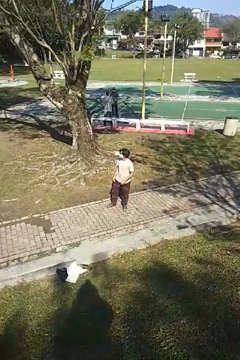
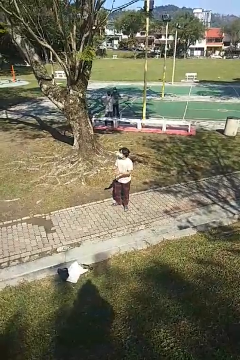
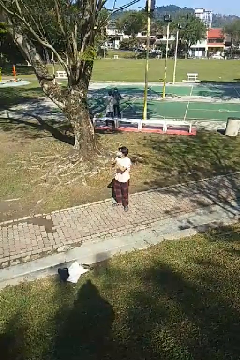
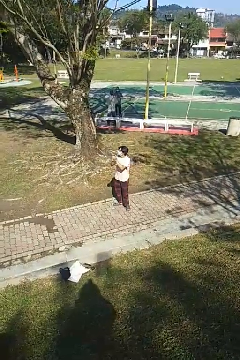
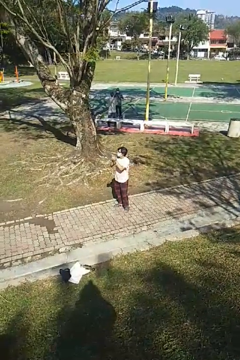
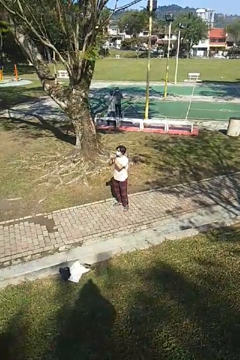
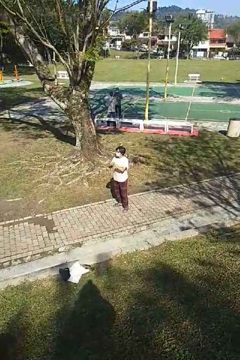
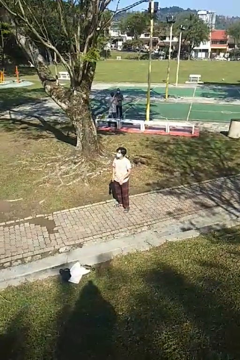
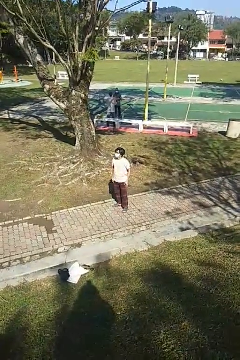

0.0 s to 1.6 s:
person claps hands

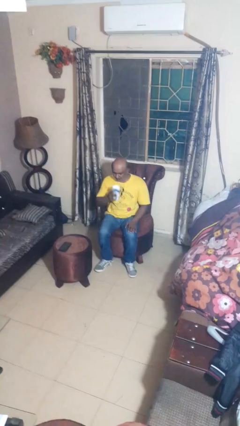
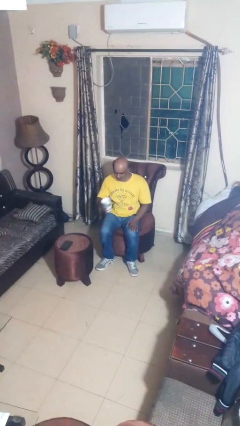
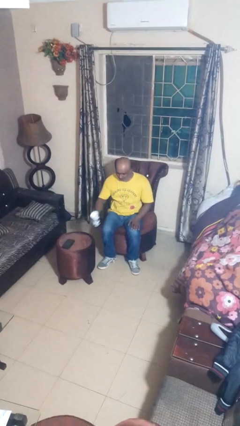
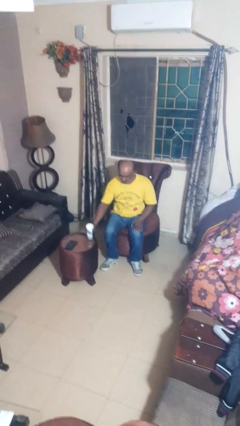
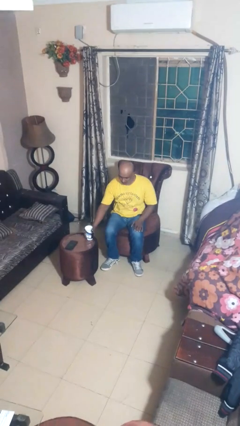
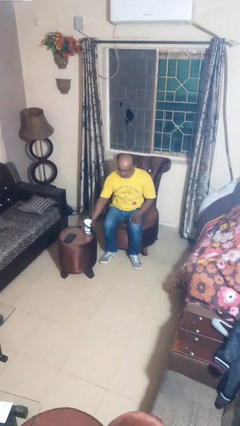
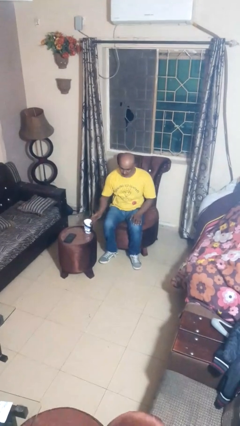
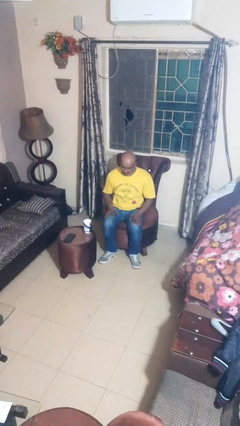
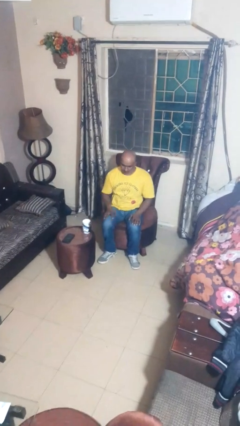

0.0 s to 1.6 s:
person puts down object on table

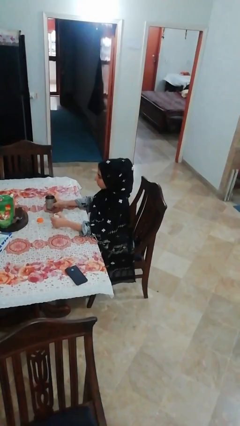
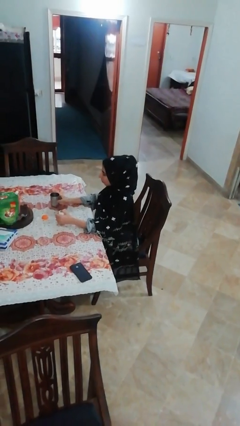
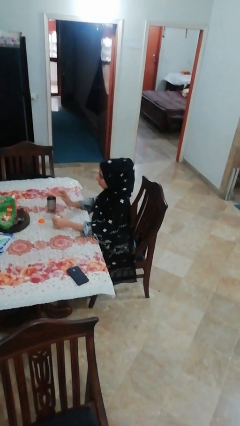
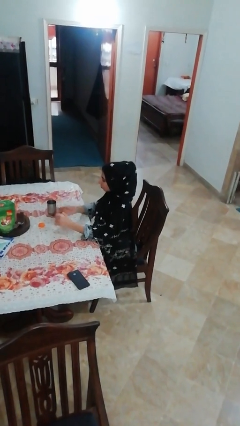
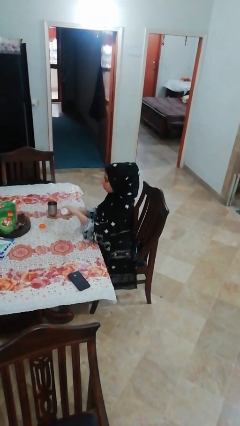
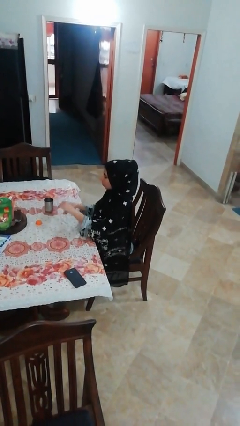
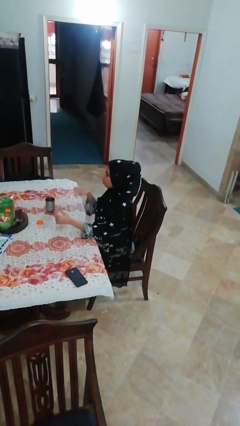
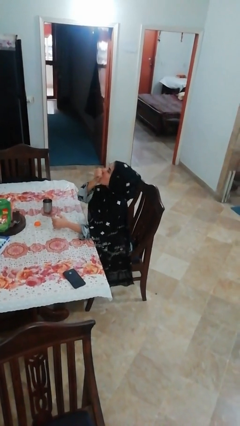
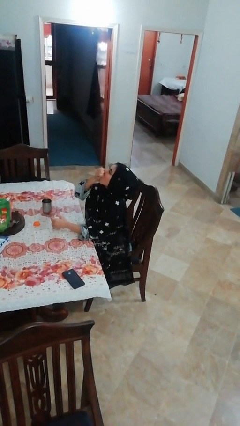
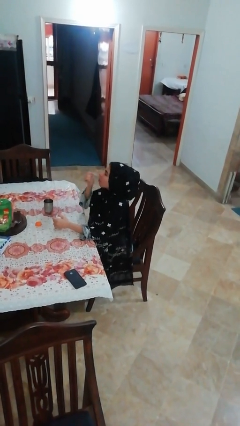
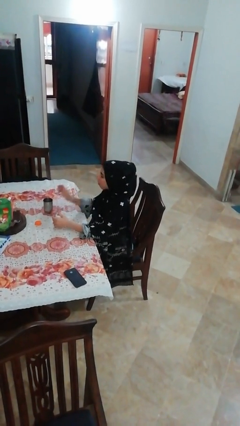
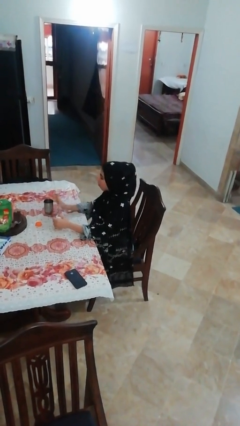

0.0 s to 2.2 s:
person takes medicine pills

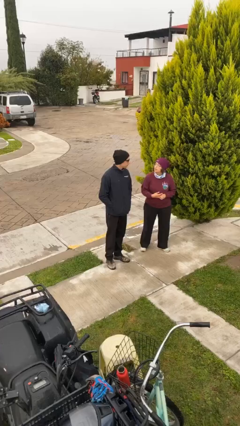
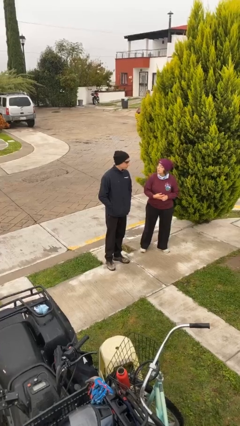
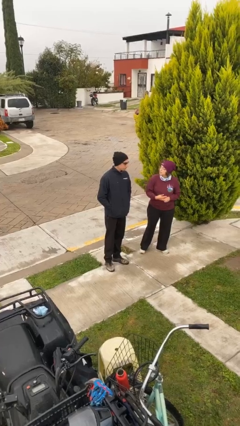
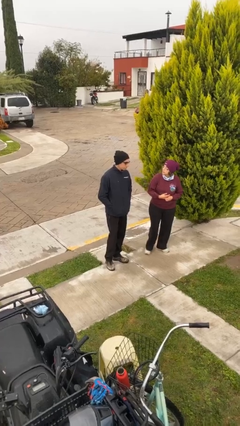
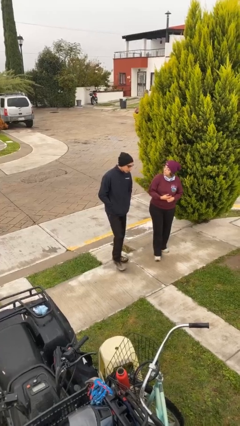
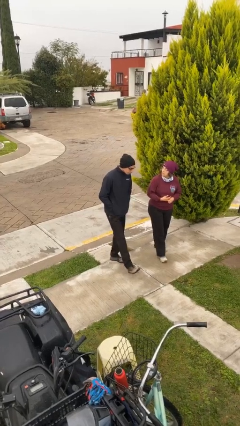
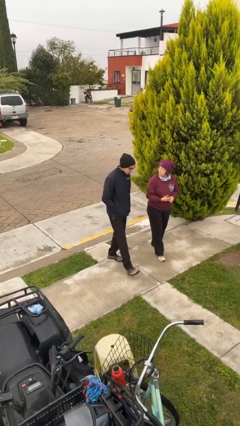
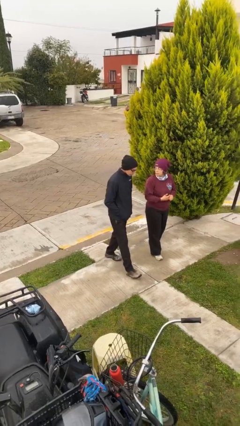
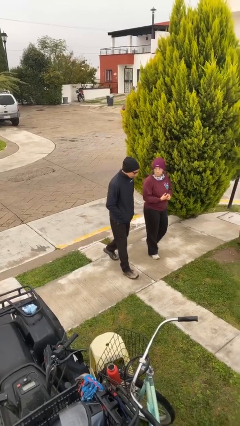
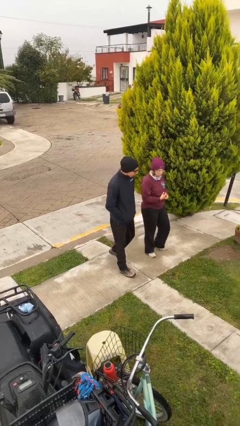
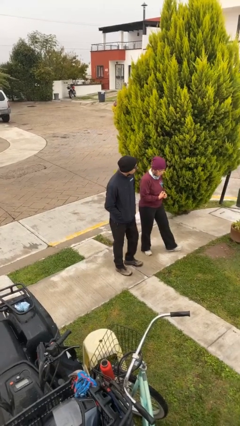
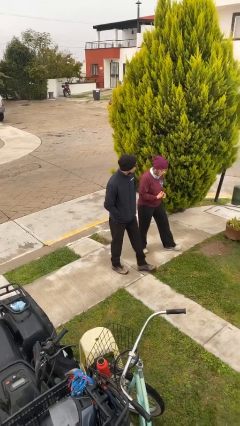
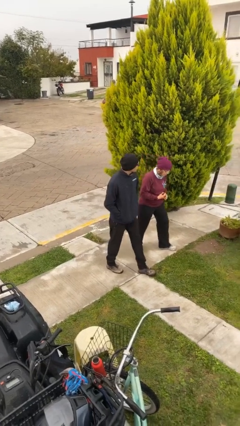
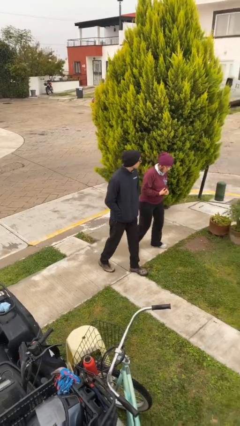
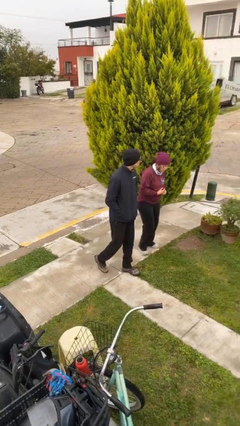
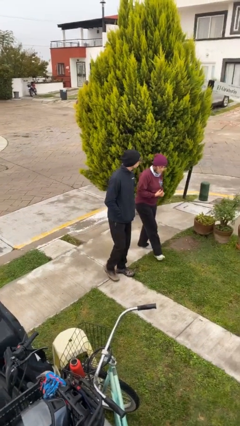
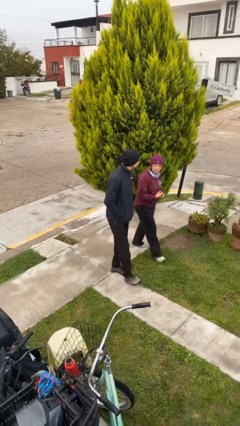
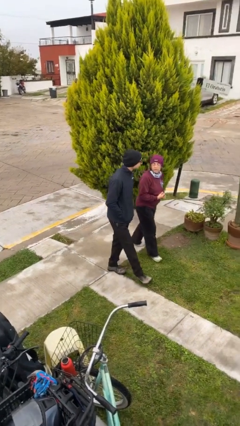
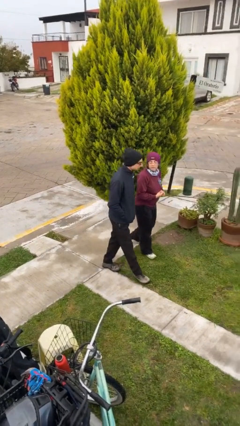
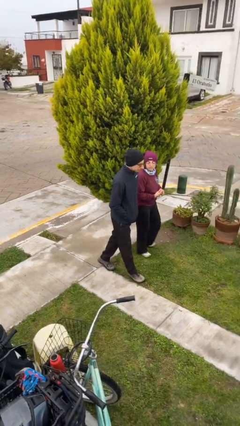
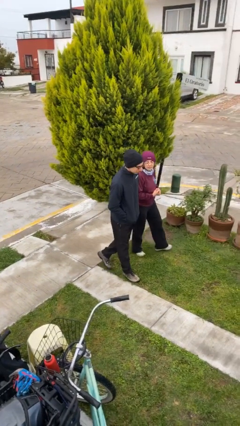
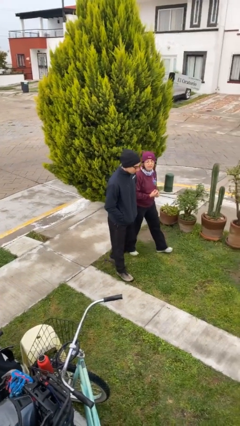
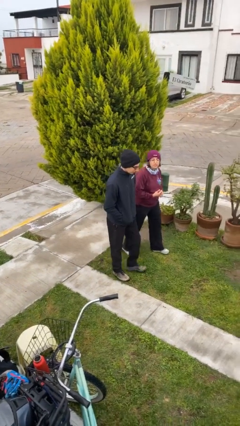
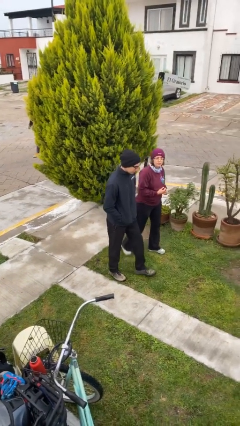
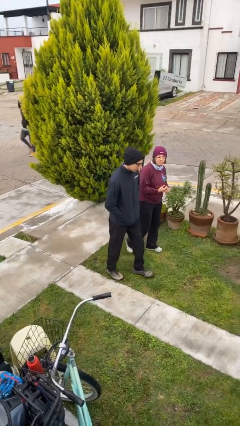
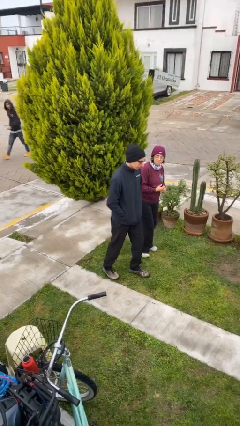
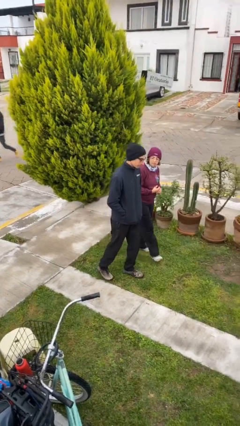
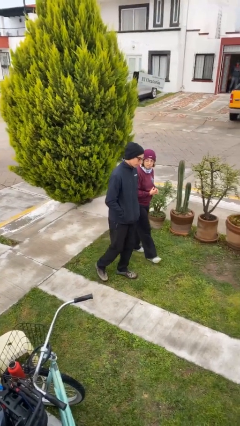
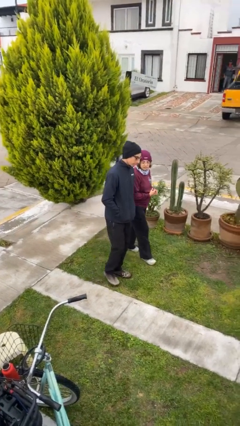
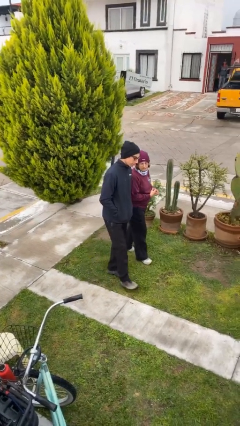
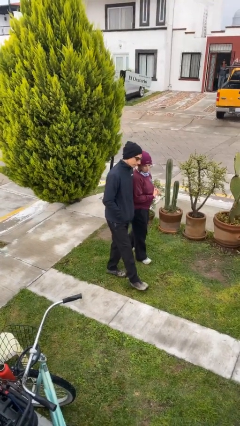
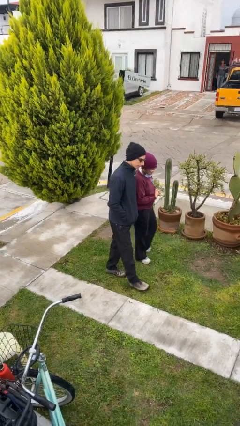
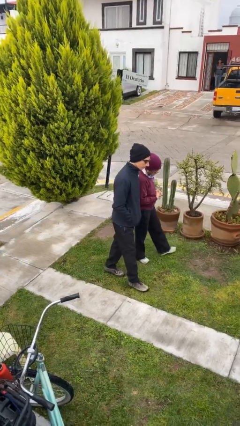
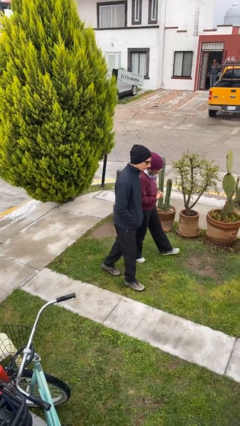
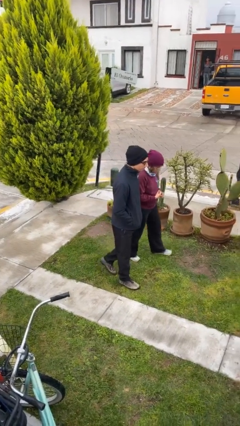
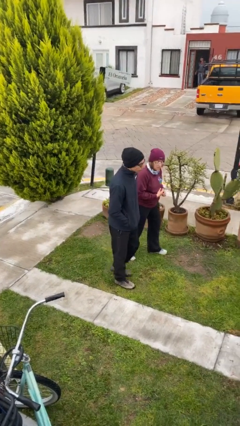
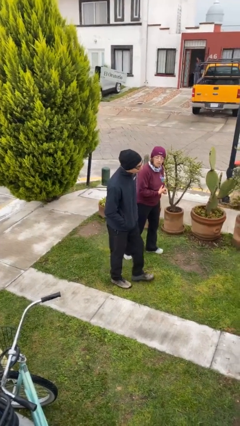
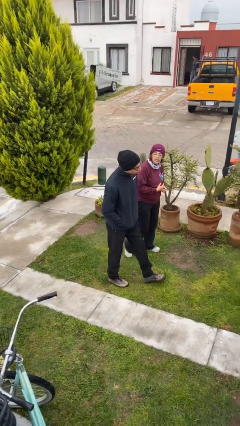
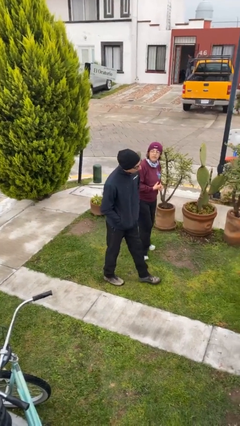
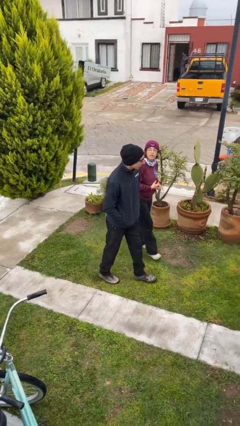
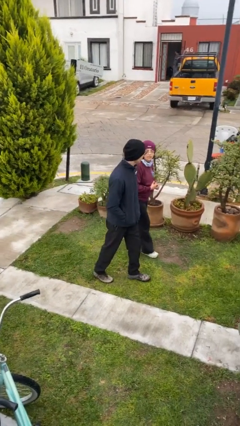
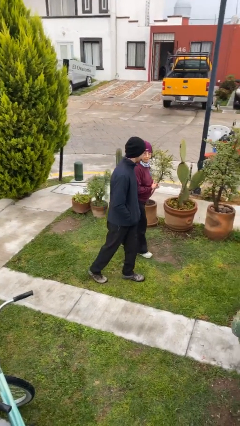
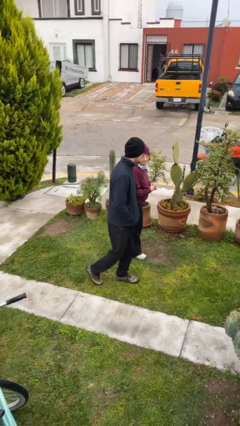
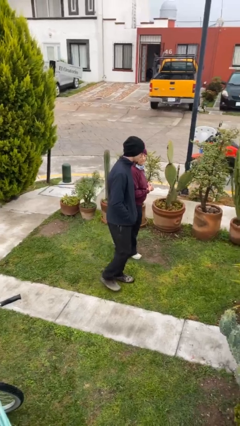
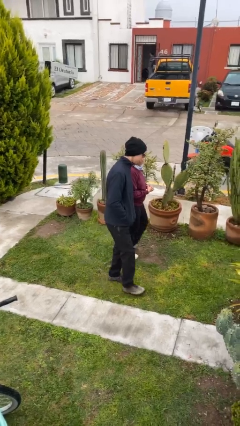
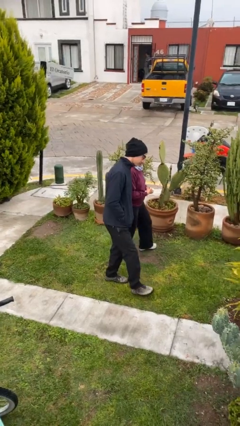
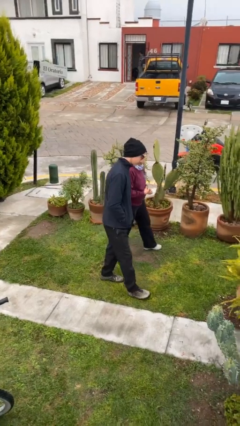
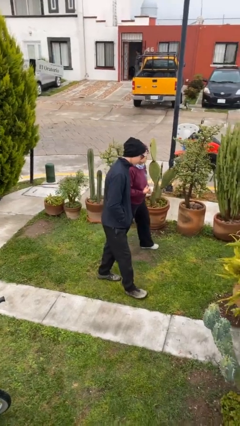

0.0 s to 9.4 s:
person talks to person

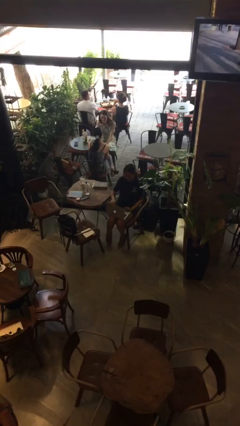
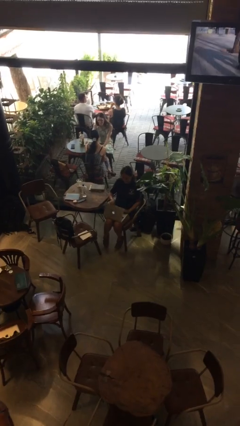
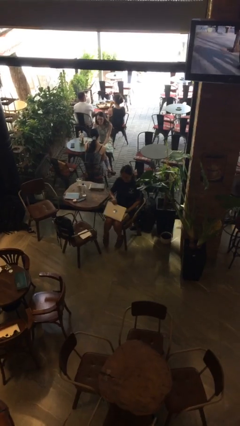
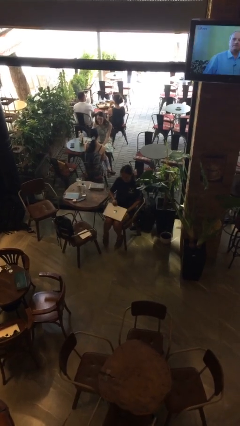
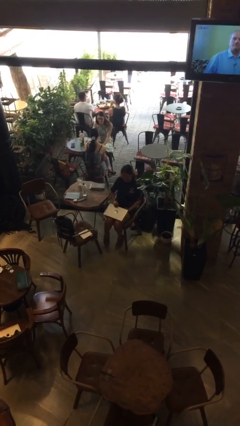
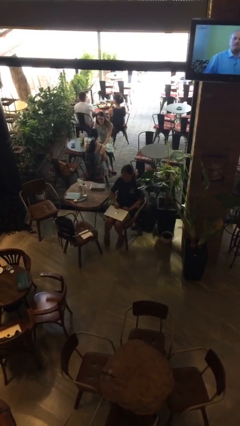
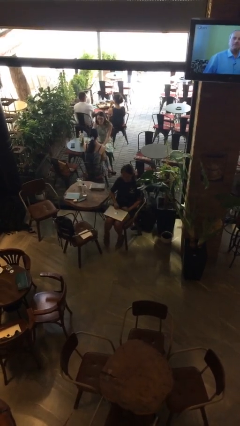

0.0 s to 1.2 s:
person closes laptop

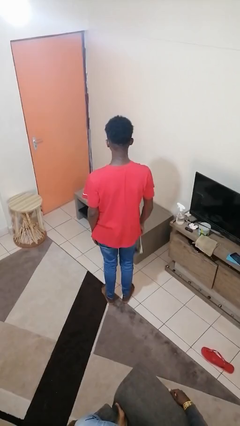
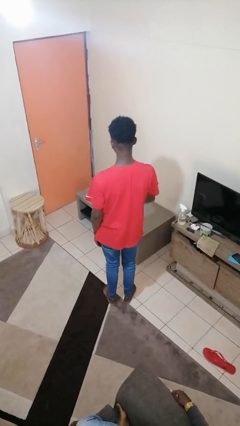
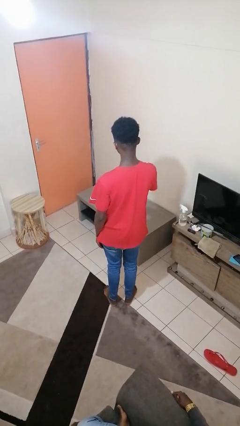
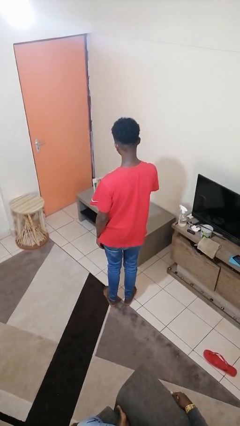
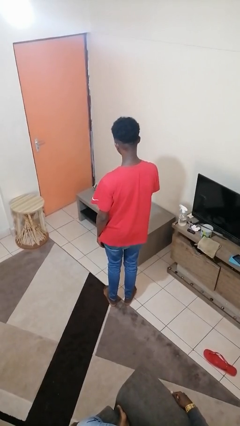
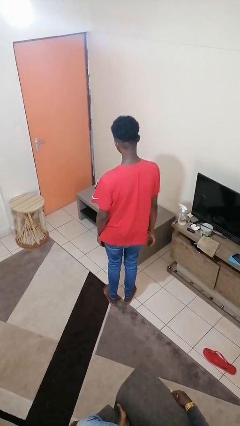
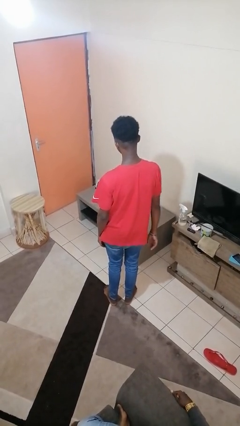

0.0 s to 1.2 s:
person throws object on table

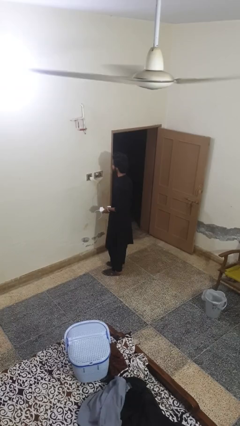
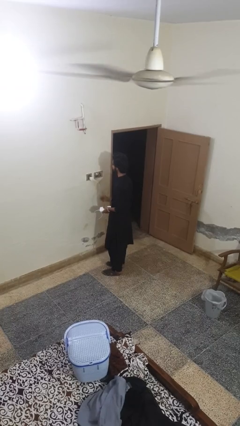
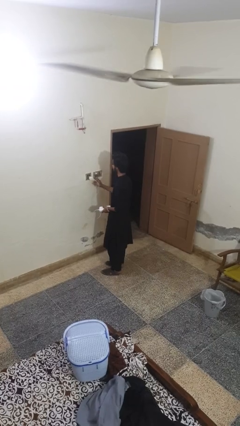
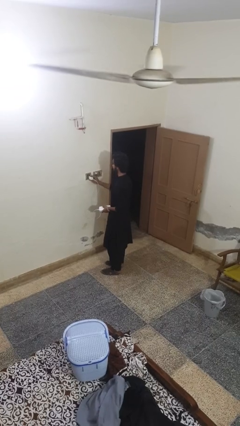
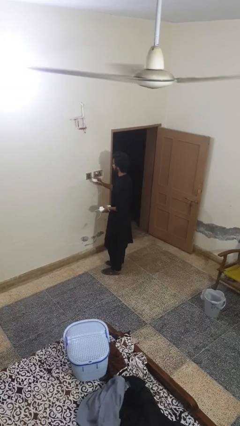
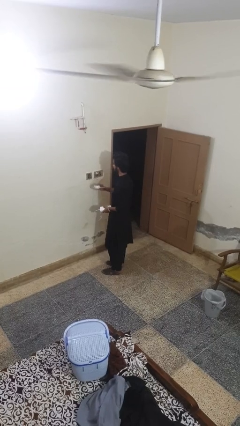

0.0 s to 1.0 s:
person unplugs from electrical socket
